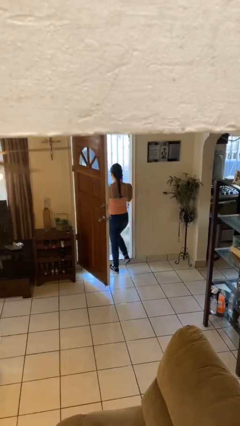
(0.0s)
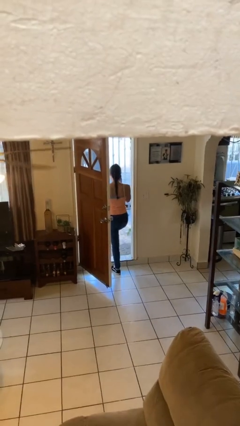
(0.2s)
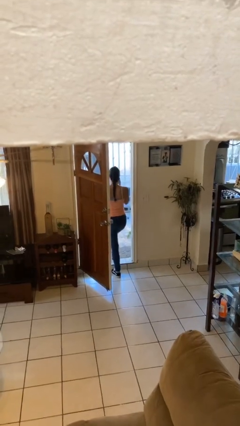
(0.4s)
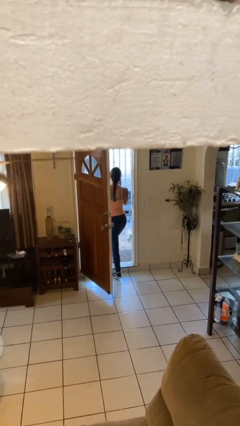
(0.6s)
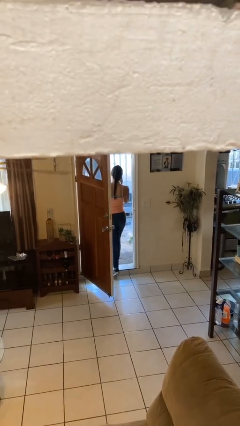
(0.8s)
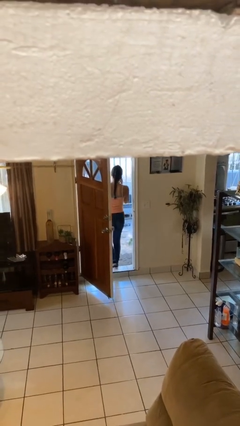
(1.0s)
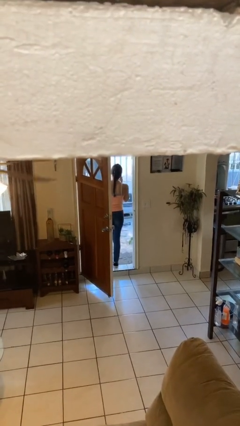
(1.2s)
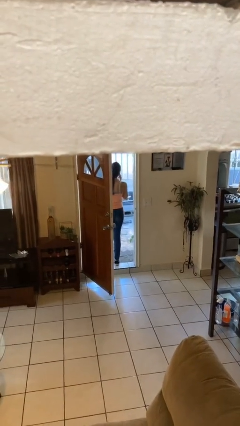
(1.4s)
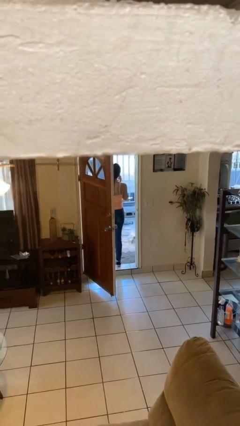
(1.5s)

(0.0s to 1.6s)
person exits scene through structure

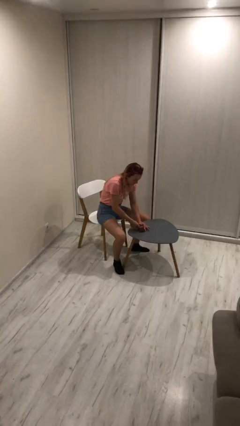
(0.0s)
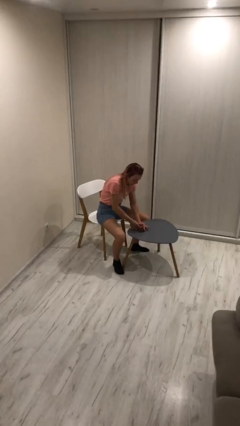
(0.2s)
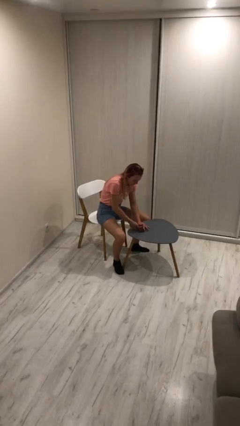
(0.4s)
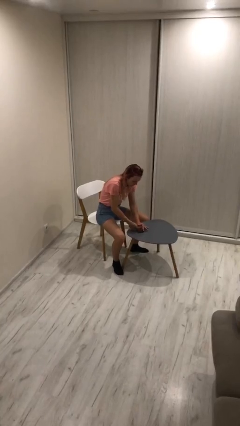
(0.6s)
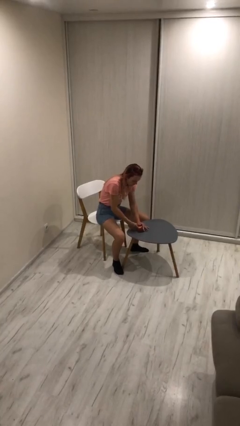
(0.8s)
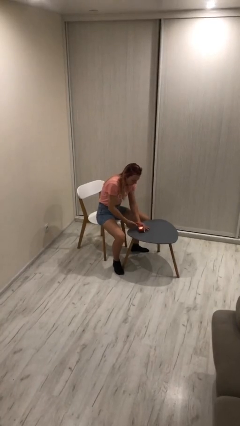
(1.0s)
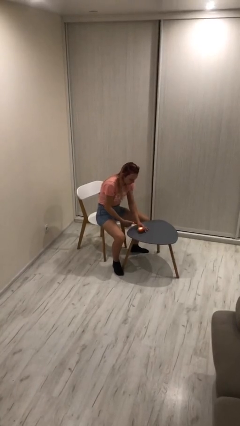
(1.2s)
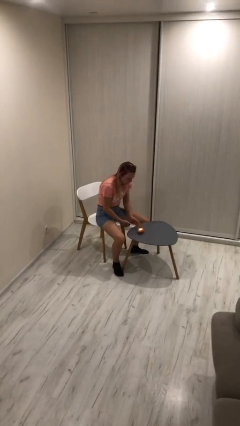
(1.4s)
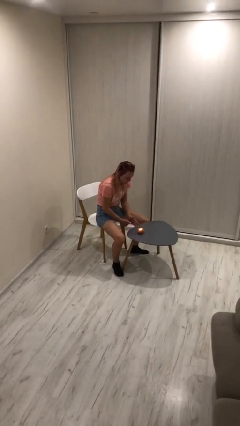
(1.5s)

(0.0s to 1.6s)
person lights candle

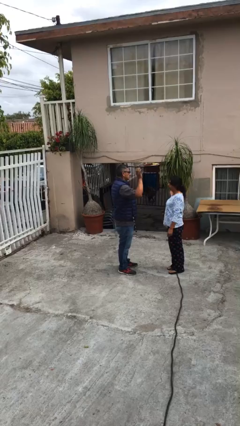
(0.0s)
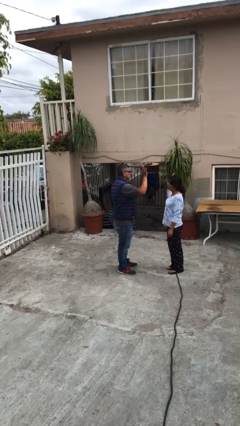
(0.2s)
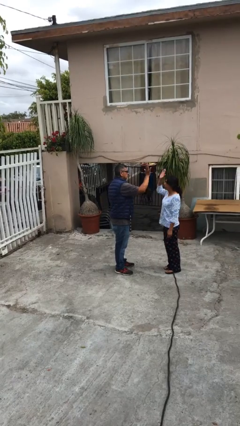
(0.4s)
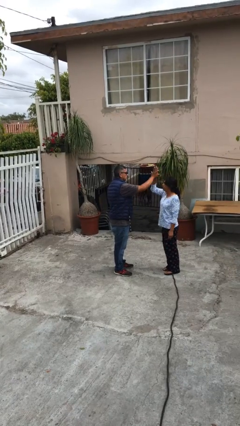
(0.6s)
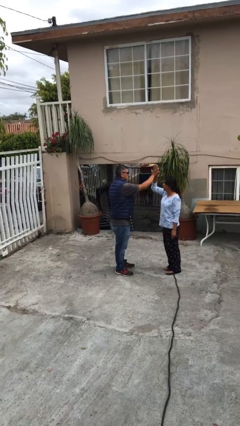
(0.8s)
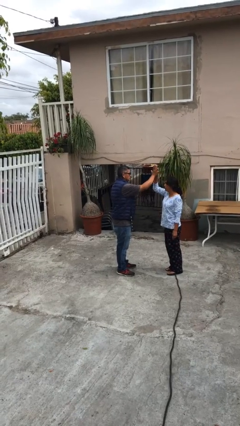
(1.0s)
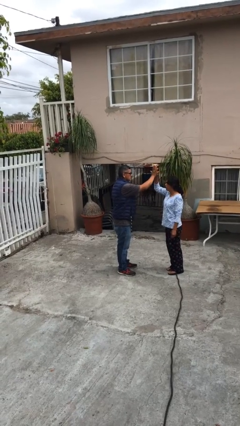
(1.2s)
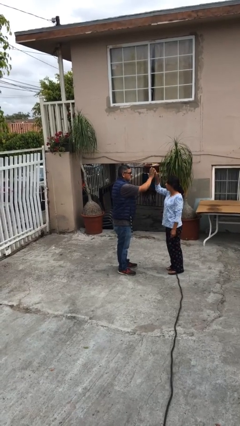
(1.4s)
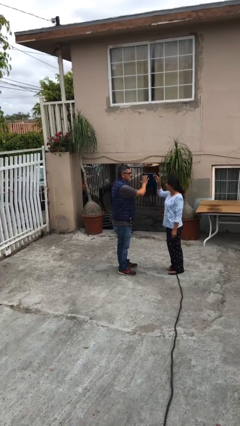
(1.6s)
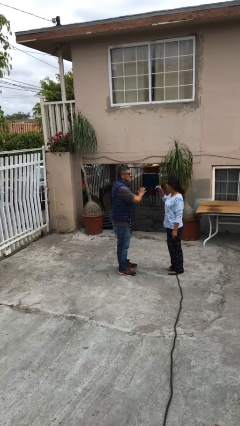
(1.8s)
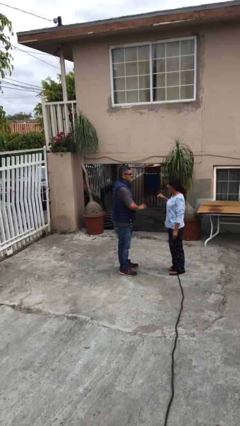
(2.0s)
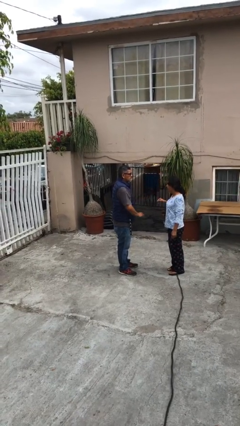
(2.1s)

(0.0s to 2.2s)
person highfives hand

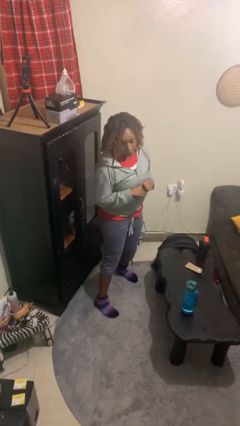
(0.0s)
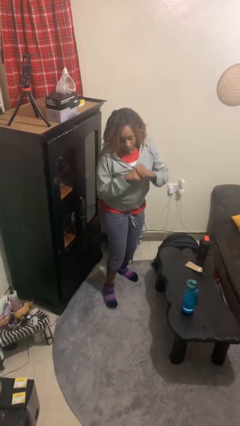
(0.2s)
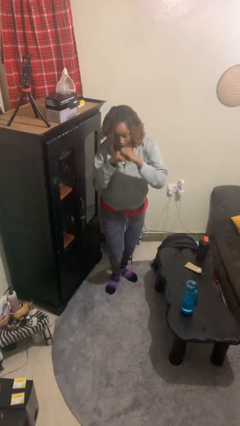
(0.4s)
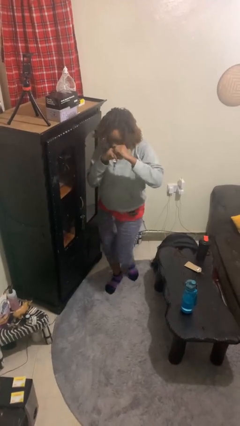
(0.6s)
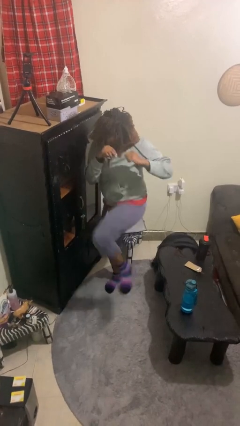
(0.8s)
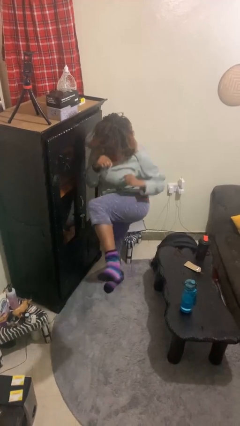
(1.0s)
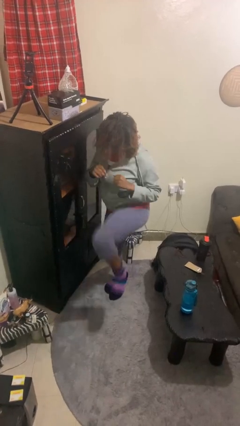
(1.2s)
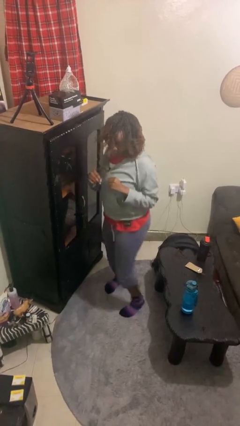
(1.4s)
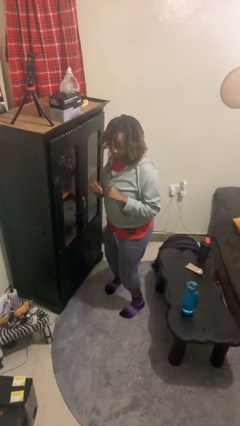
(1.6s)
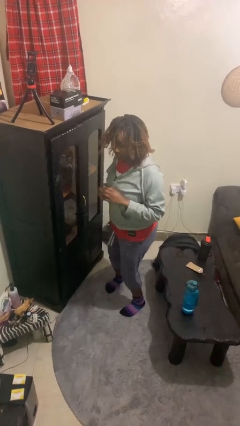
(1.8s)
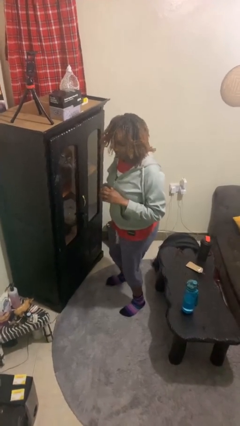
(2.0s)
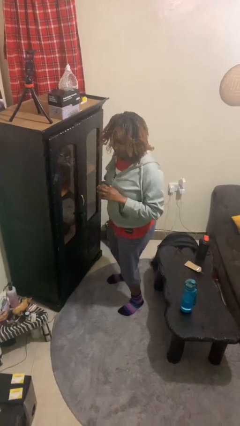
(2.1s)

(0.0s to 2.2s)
person karate kicks

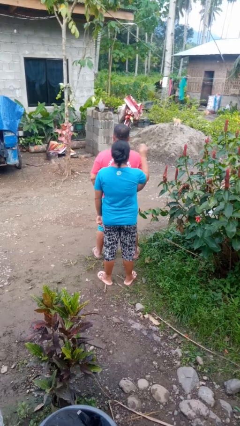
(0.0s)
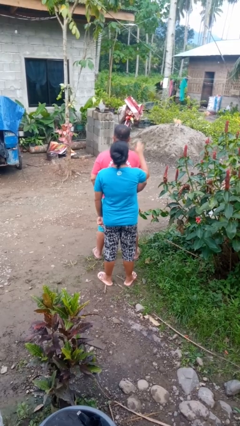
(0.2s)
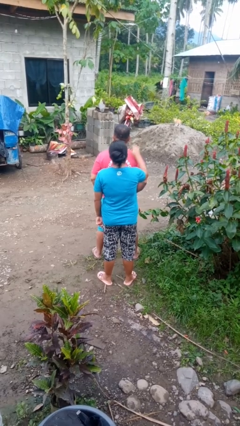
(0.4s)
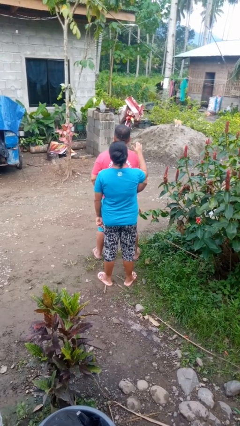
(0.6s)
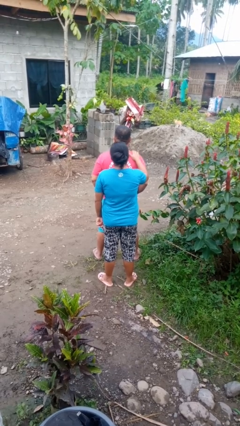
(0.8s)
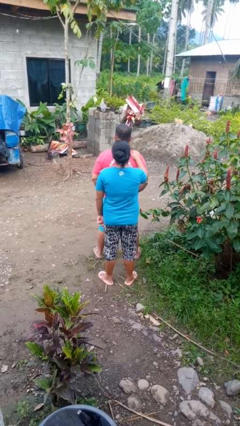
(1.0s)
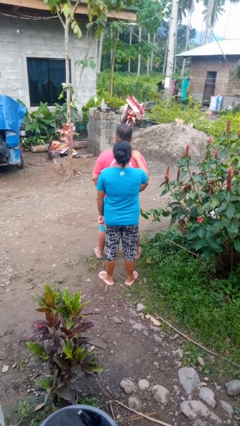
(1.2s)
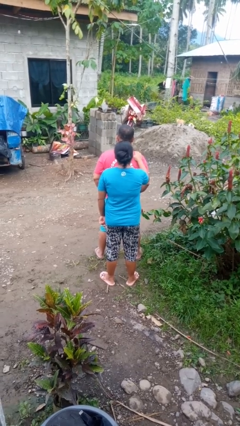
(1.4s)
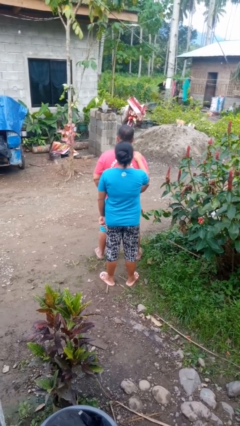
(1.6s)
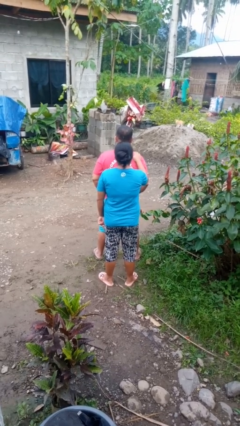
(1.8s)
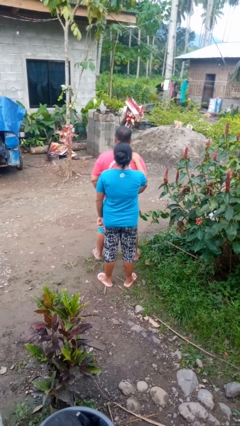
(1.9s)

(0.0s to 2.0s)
person pounds shoulders of person

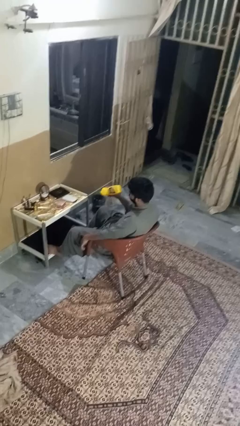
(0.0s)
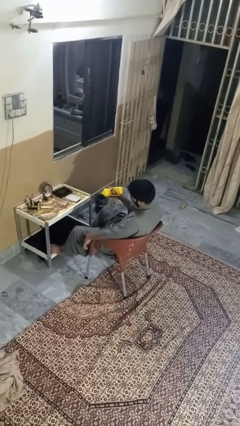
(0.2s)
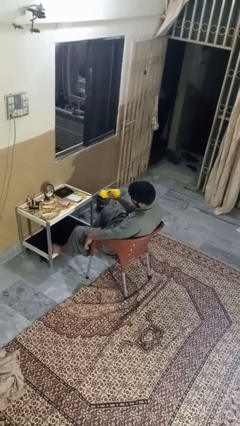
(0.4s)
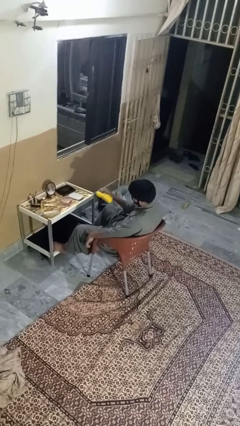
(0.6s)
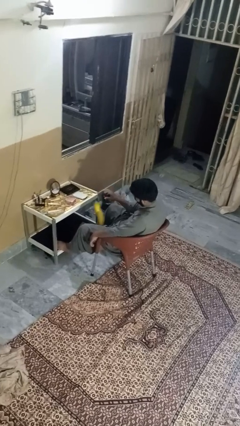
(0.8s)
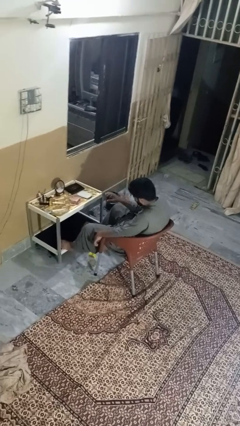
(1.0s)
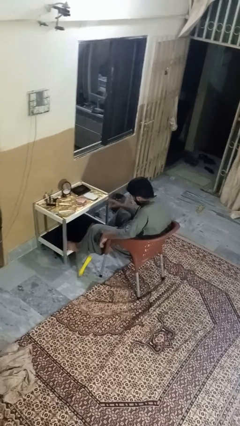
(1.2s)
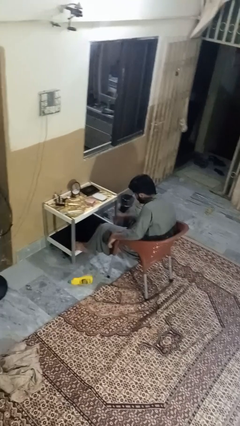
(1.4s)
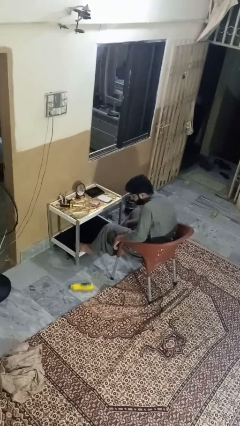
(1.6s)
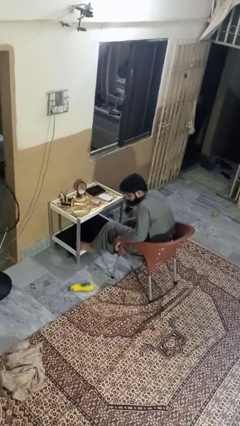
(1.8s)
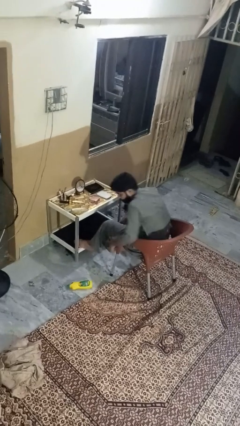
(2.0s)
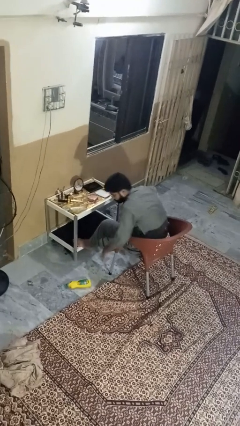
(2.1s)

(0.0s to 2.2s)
person throws object to ground

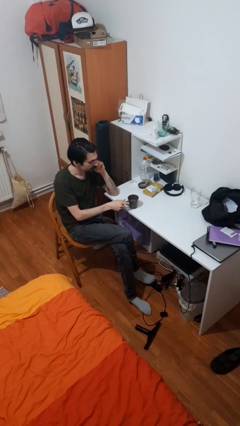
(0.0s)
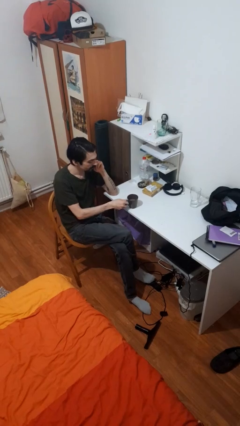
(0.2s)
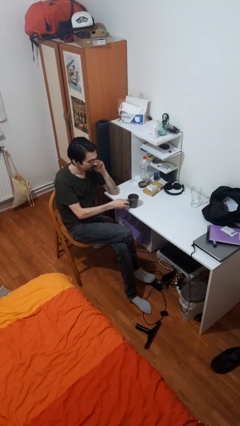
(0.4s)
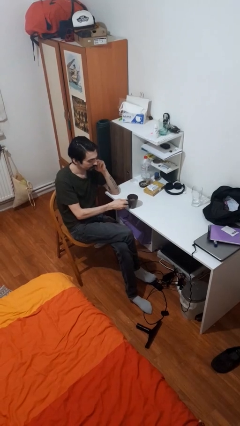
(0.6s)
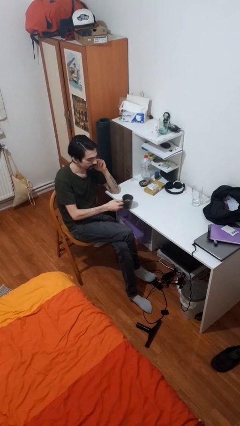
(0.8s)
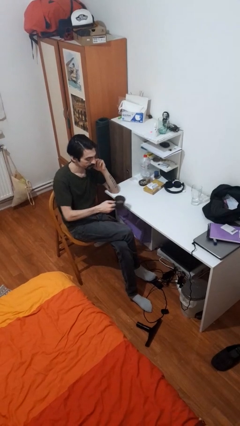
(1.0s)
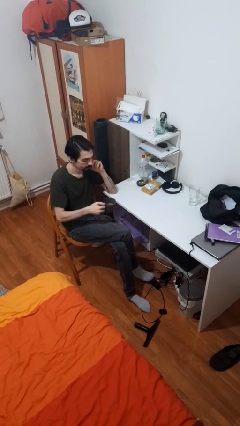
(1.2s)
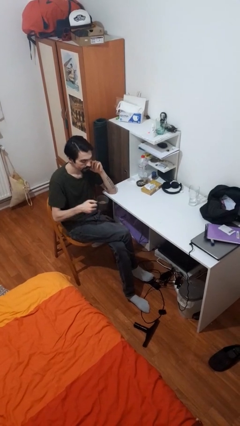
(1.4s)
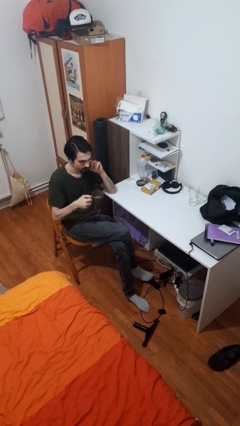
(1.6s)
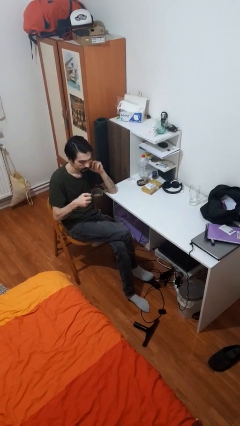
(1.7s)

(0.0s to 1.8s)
person picks up object from table

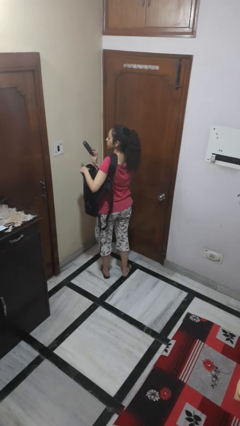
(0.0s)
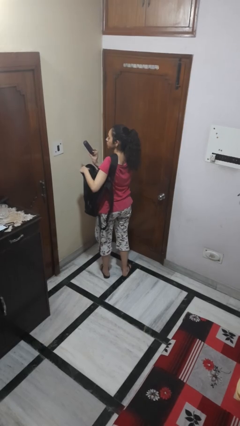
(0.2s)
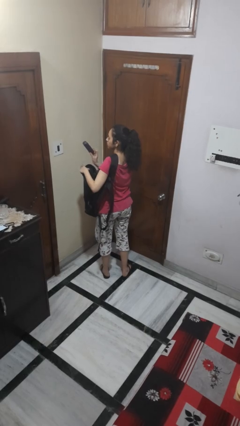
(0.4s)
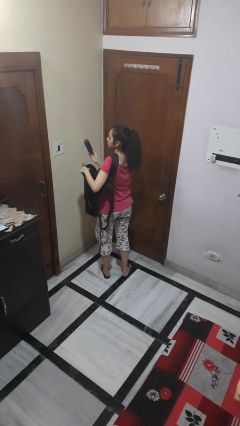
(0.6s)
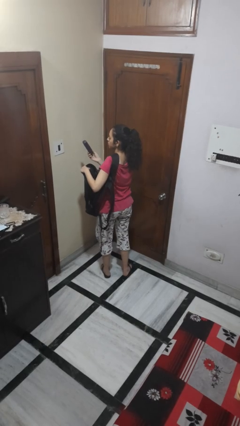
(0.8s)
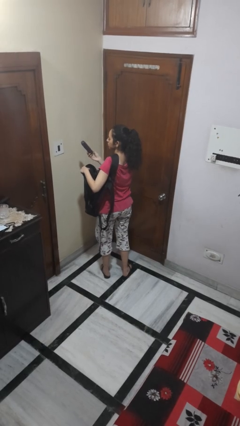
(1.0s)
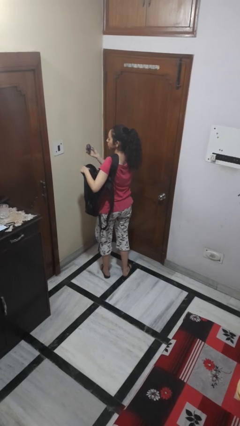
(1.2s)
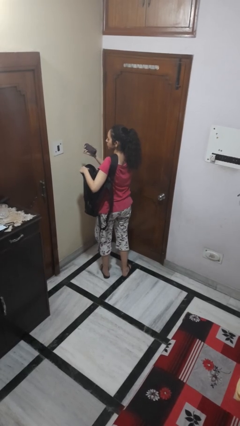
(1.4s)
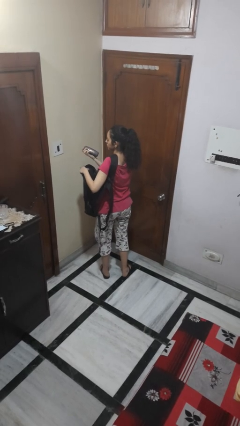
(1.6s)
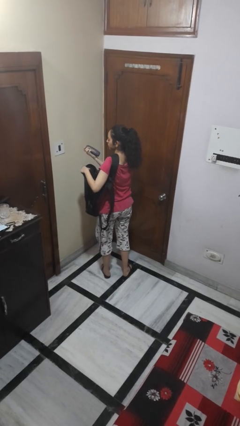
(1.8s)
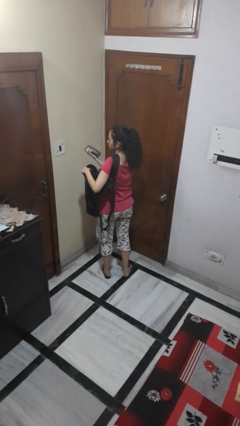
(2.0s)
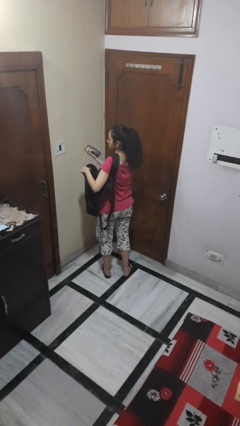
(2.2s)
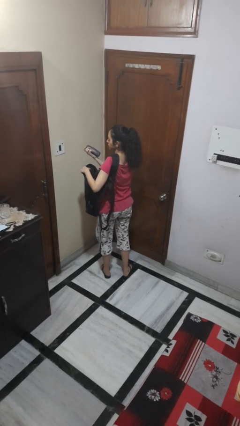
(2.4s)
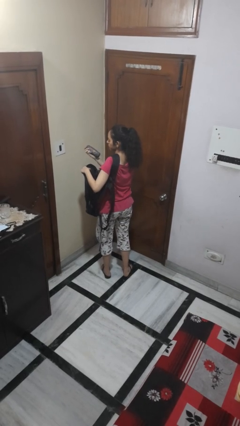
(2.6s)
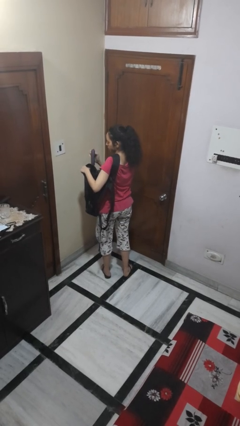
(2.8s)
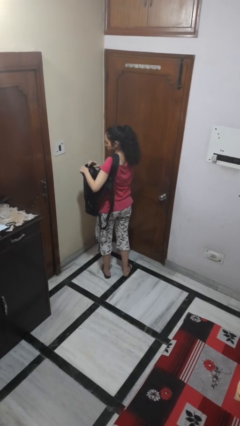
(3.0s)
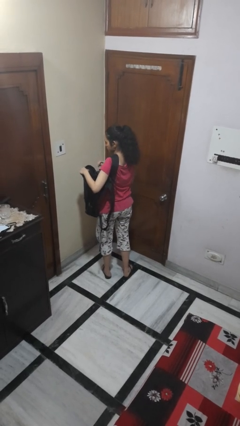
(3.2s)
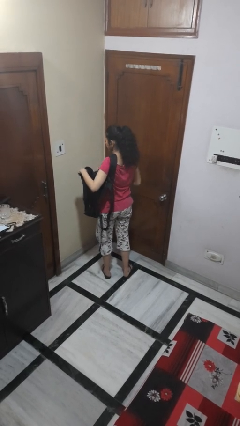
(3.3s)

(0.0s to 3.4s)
person takes object from backpack
